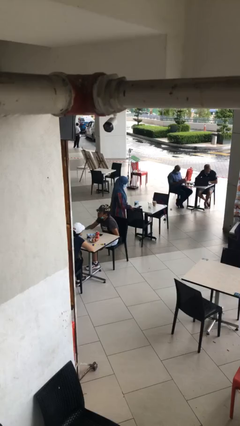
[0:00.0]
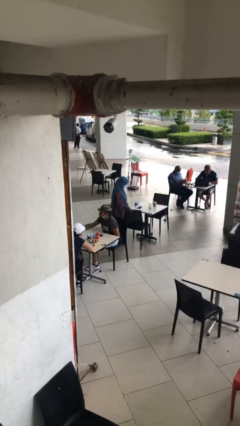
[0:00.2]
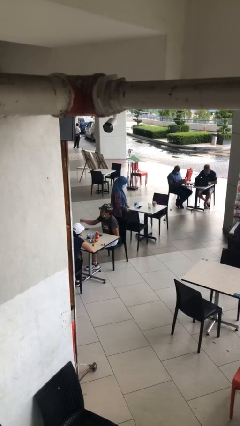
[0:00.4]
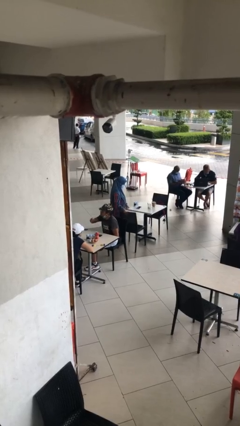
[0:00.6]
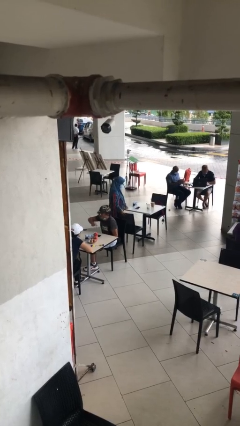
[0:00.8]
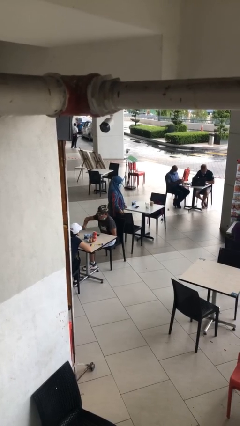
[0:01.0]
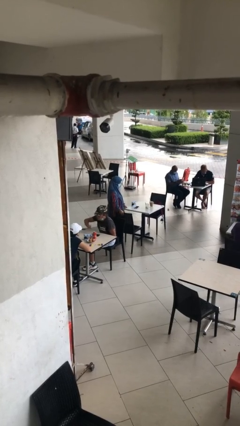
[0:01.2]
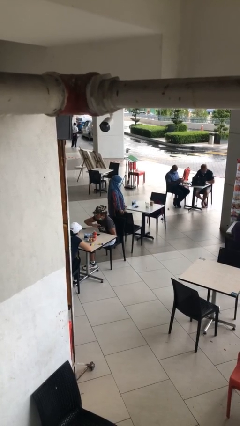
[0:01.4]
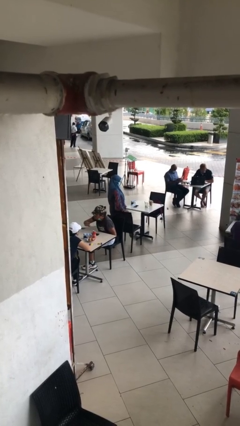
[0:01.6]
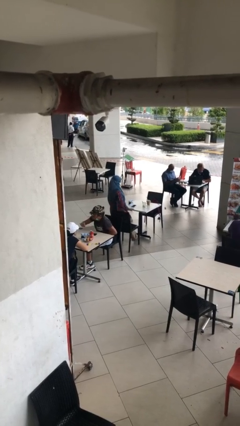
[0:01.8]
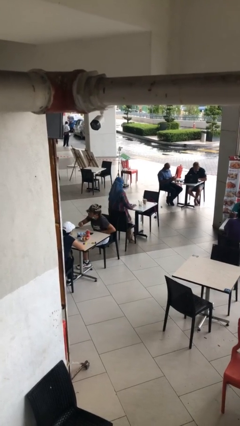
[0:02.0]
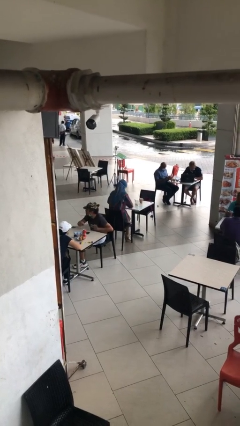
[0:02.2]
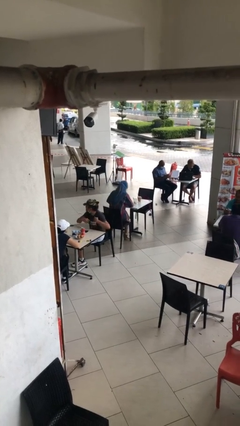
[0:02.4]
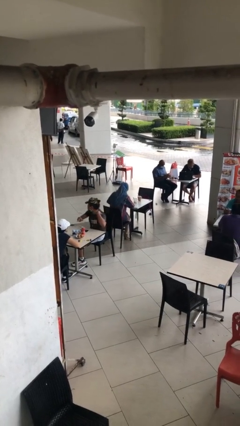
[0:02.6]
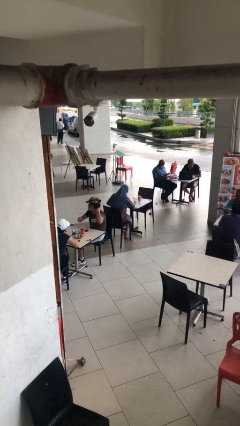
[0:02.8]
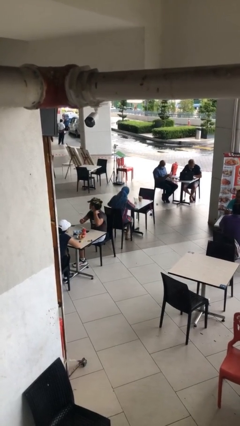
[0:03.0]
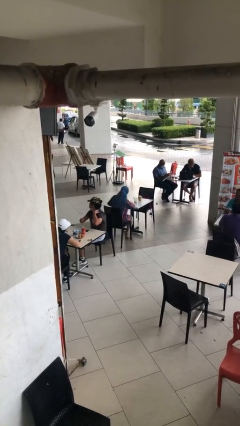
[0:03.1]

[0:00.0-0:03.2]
person sits down

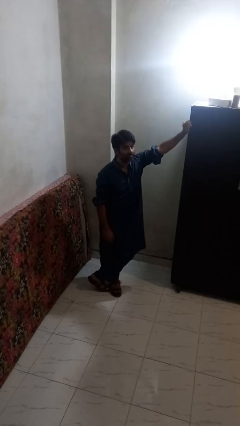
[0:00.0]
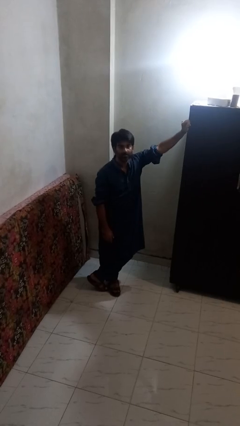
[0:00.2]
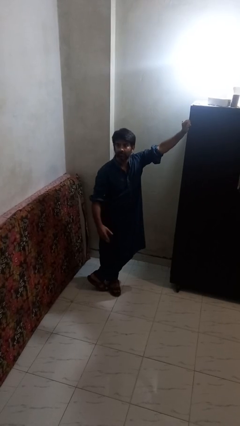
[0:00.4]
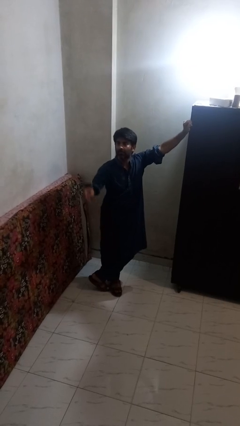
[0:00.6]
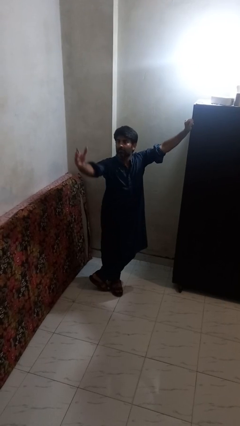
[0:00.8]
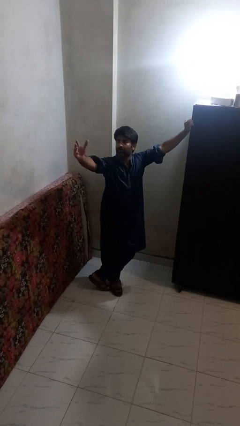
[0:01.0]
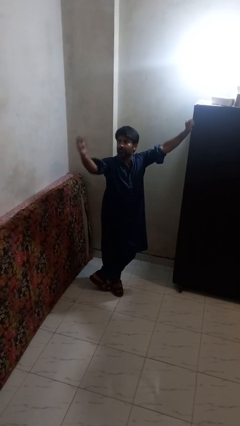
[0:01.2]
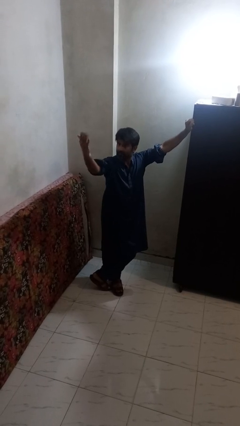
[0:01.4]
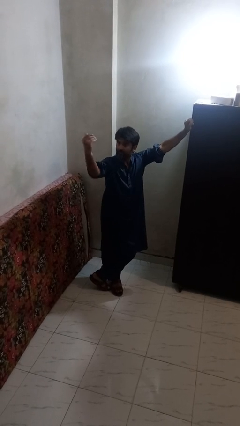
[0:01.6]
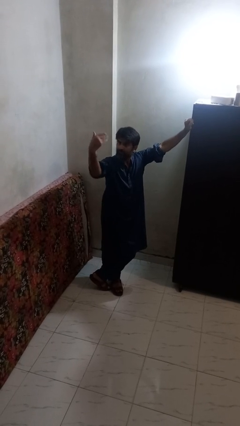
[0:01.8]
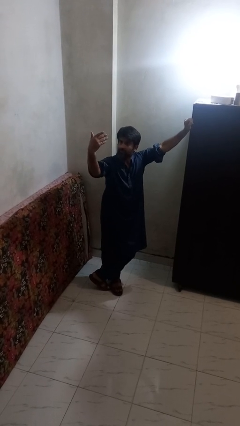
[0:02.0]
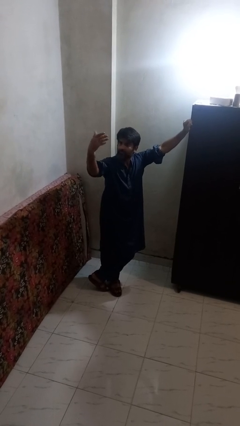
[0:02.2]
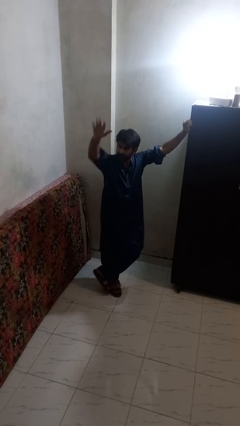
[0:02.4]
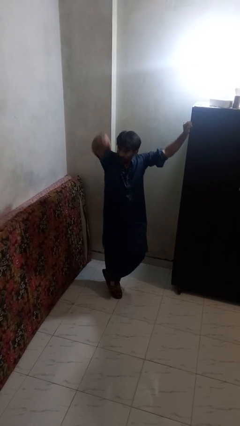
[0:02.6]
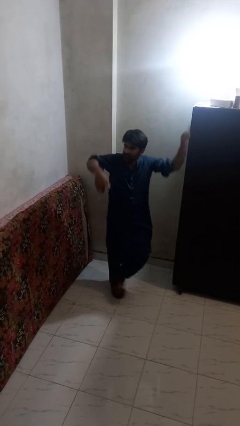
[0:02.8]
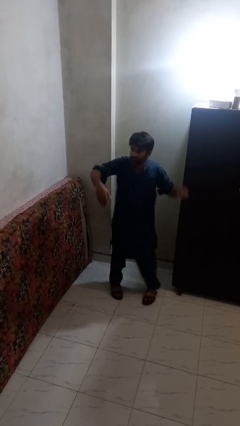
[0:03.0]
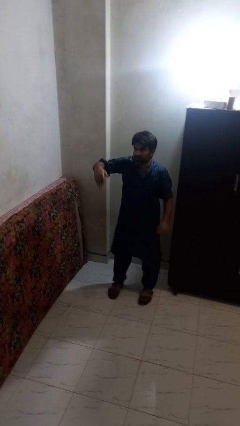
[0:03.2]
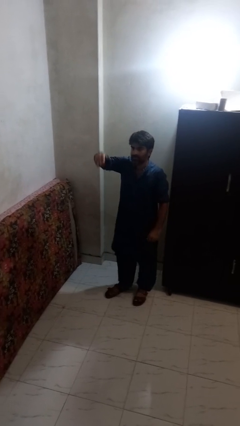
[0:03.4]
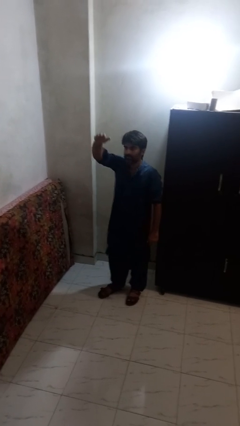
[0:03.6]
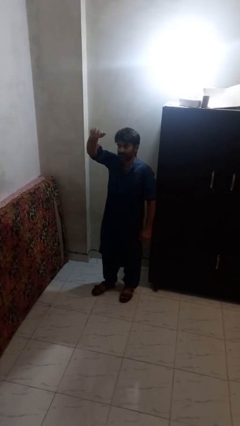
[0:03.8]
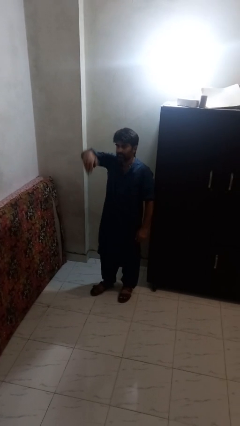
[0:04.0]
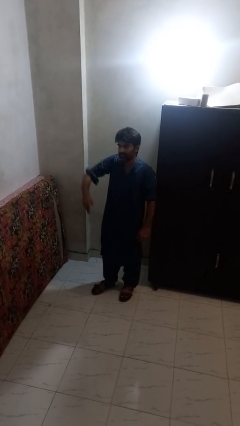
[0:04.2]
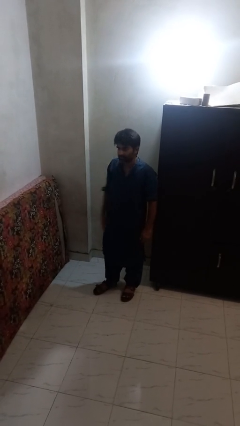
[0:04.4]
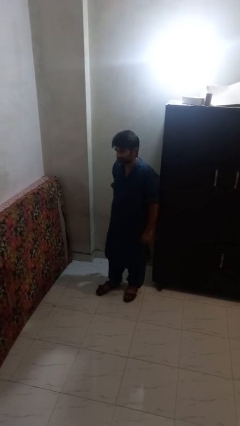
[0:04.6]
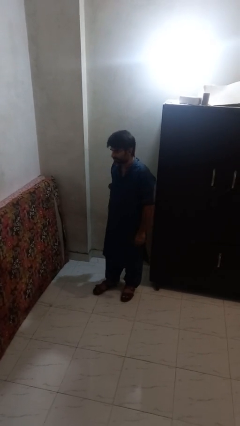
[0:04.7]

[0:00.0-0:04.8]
person gestures come here

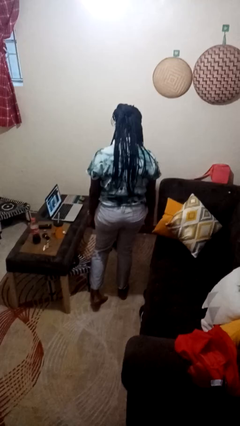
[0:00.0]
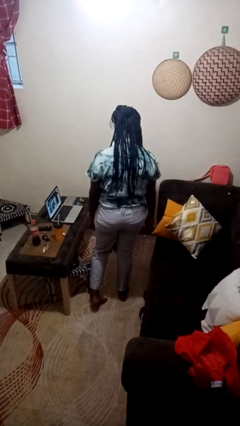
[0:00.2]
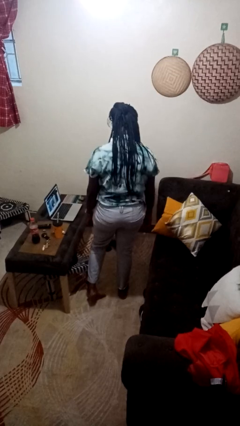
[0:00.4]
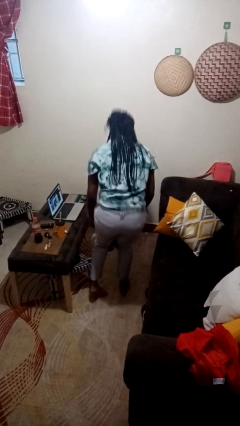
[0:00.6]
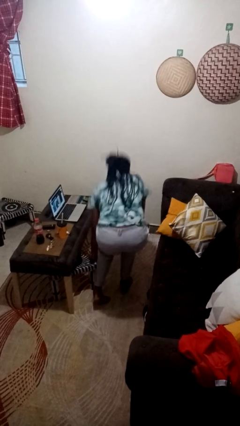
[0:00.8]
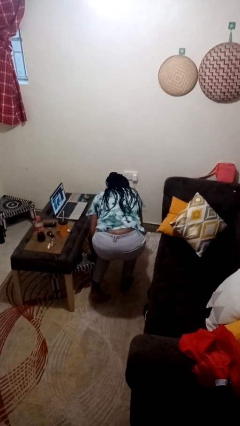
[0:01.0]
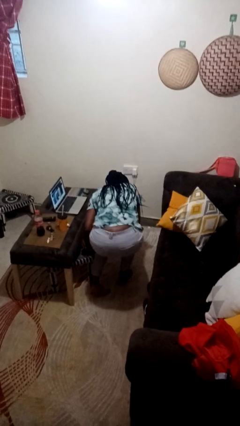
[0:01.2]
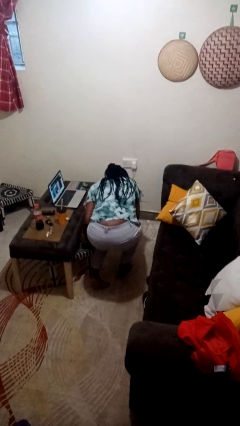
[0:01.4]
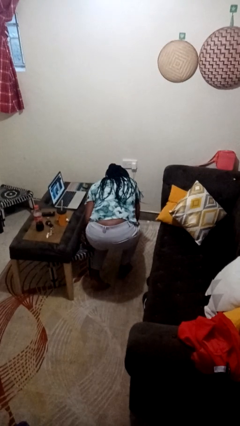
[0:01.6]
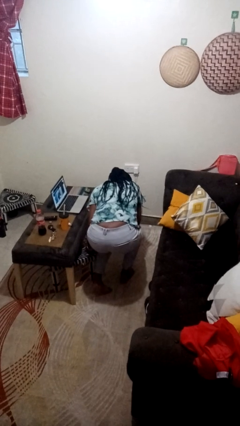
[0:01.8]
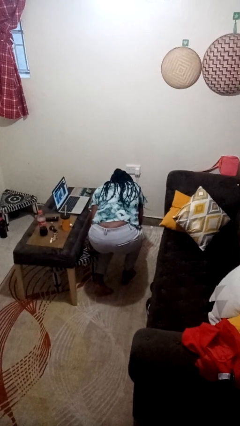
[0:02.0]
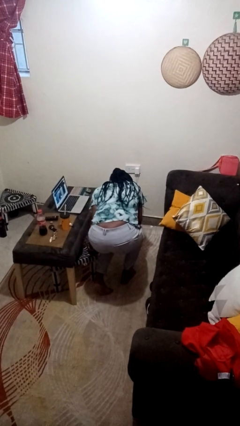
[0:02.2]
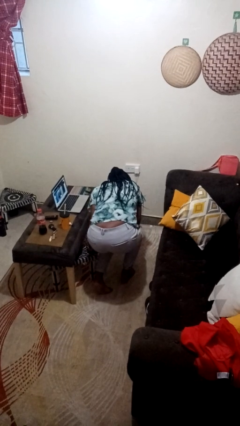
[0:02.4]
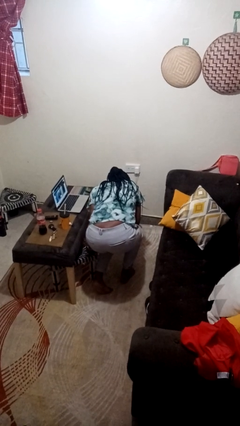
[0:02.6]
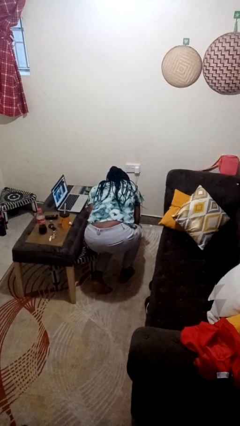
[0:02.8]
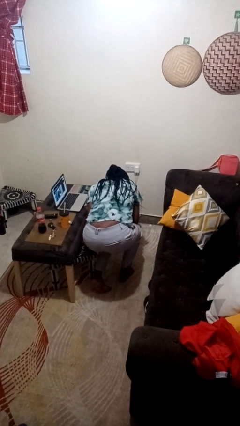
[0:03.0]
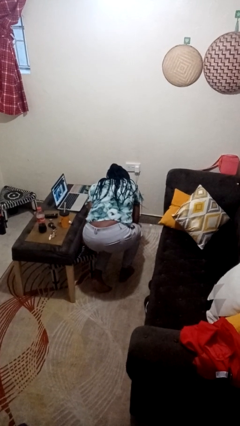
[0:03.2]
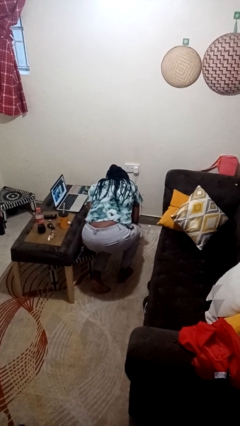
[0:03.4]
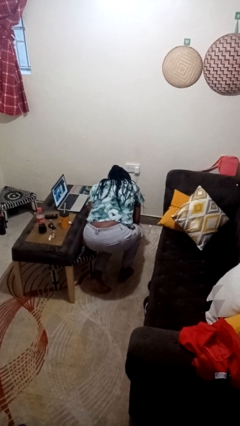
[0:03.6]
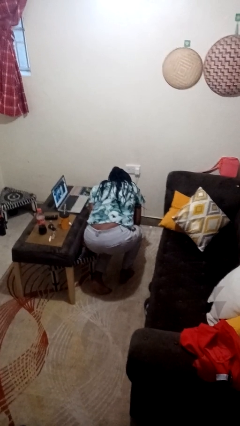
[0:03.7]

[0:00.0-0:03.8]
person trips on object on floor

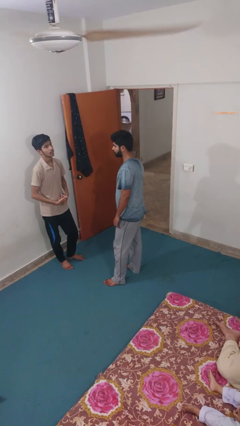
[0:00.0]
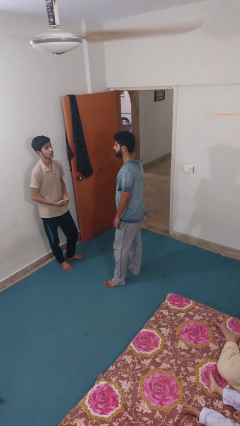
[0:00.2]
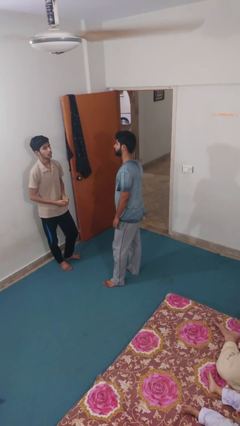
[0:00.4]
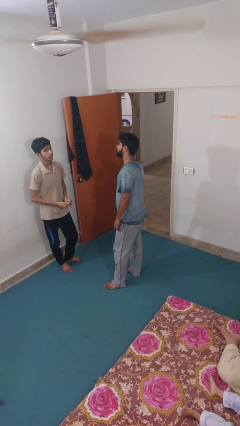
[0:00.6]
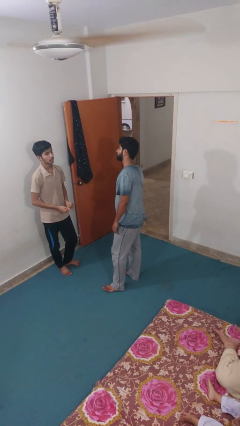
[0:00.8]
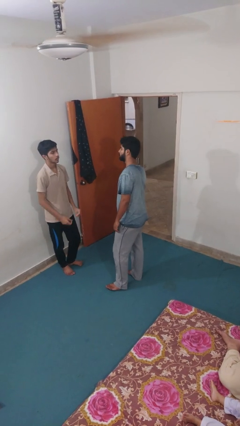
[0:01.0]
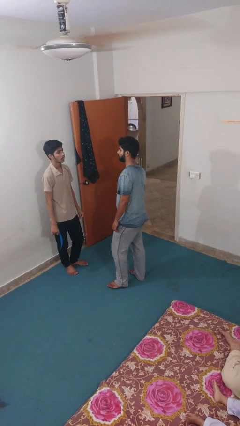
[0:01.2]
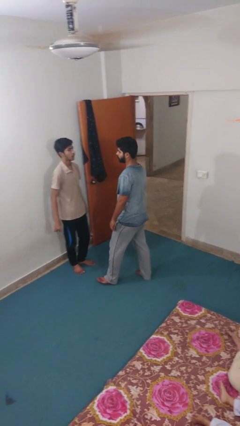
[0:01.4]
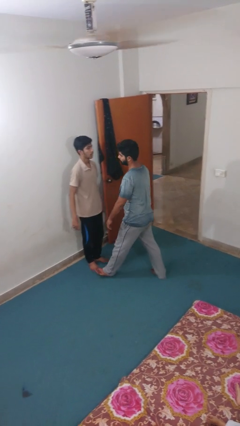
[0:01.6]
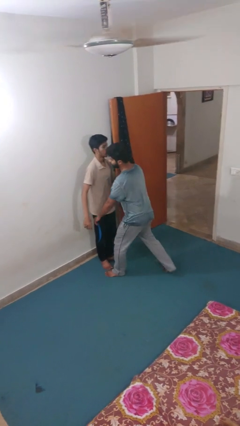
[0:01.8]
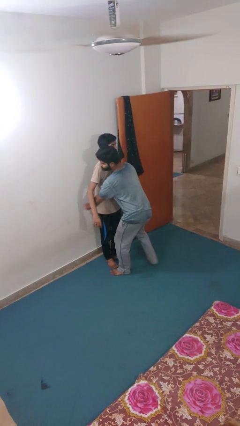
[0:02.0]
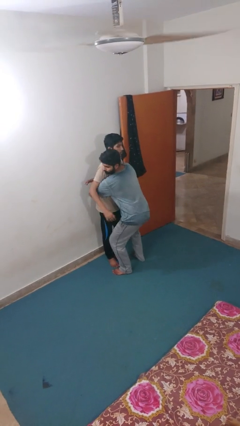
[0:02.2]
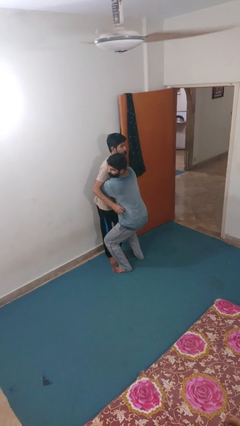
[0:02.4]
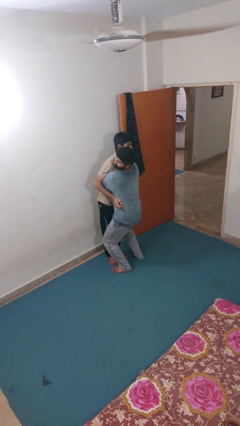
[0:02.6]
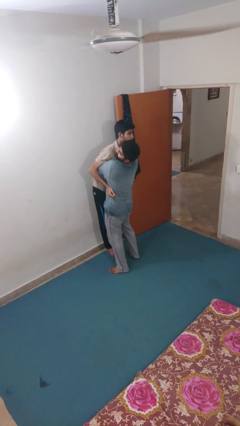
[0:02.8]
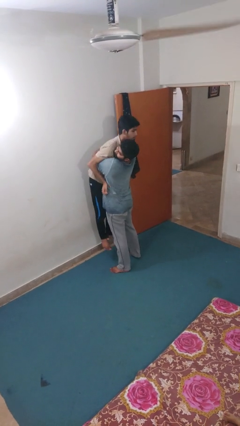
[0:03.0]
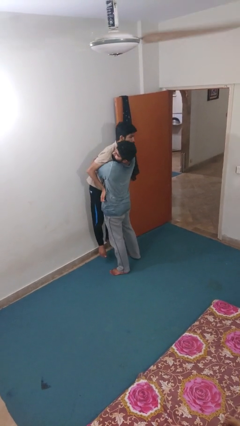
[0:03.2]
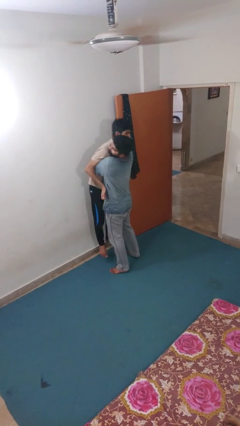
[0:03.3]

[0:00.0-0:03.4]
person picks up person

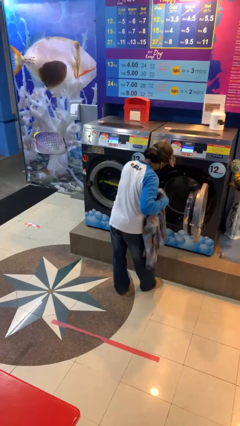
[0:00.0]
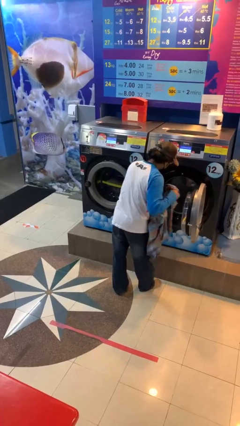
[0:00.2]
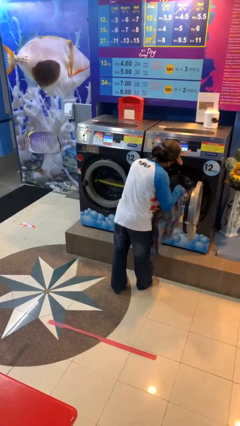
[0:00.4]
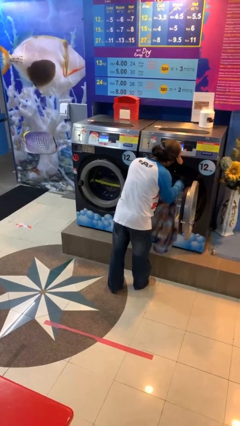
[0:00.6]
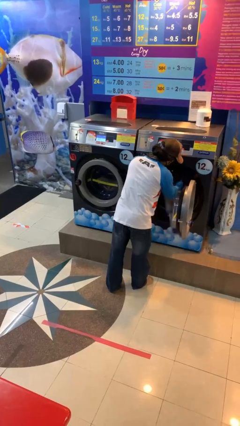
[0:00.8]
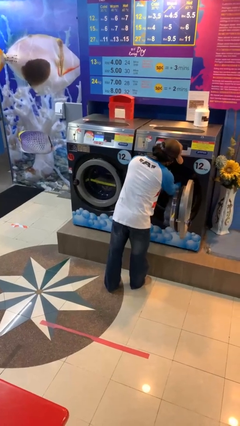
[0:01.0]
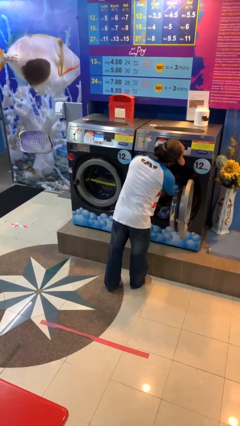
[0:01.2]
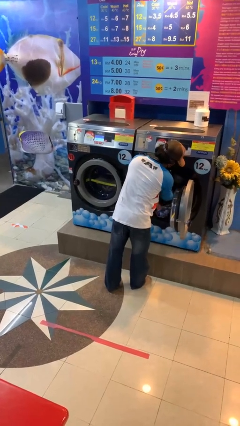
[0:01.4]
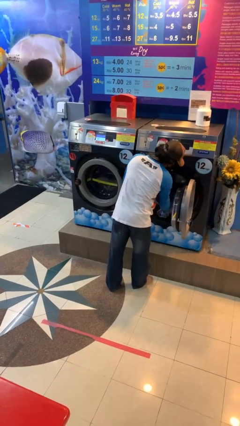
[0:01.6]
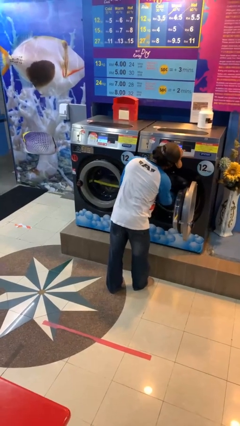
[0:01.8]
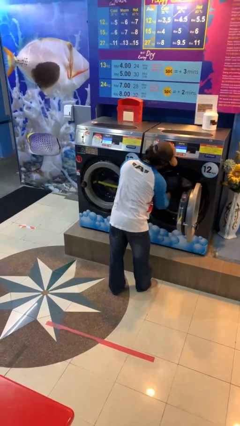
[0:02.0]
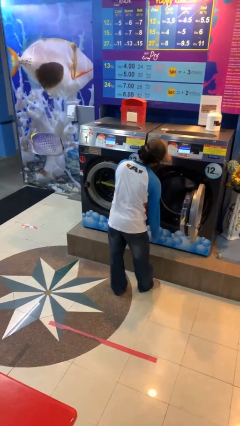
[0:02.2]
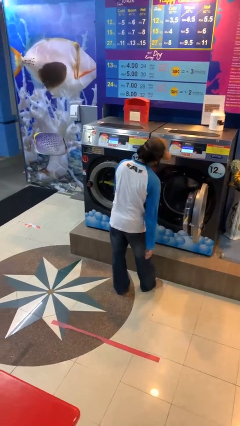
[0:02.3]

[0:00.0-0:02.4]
person loads clotheswasher
